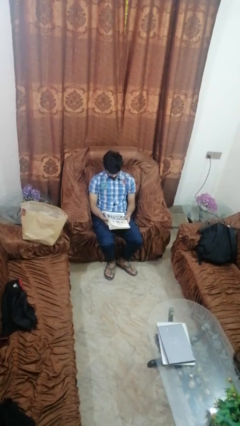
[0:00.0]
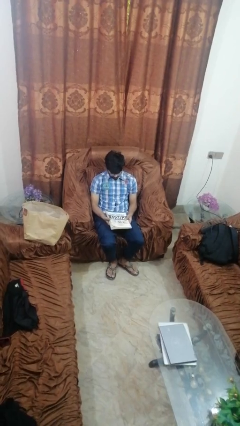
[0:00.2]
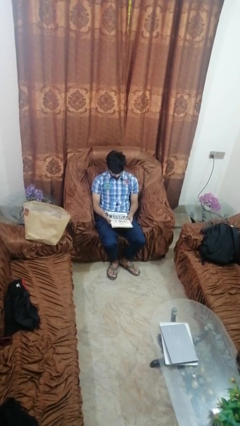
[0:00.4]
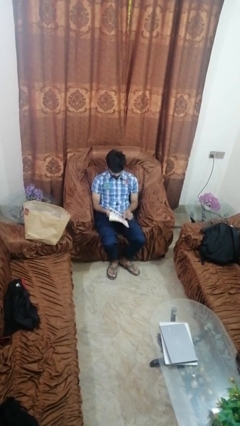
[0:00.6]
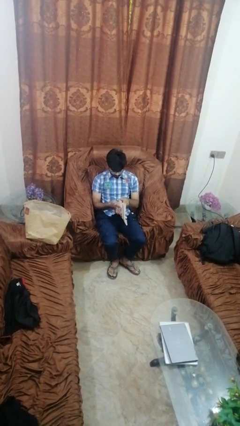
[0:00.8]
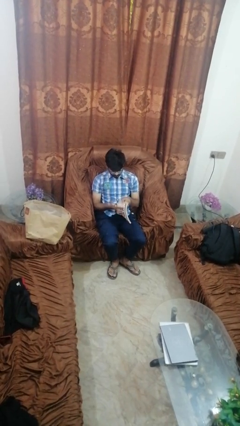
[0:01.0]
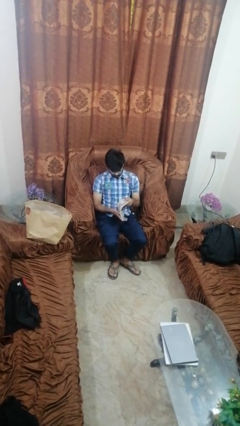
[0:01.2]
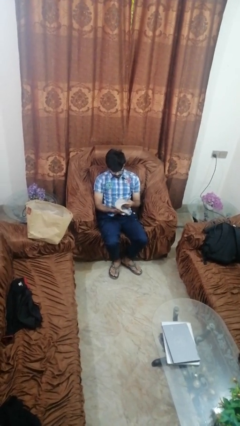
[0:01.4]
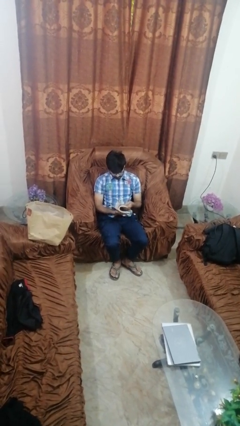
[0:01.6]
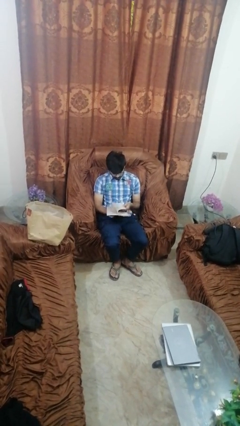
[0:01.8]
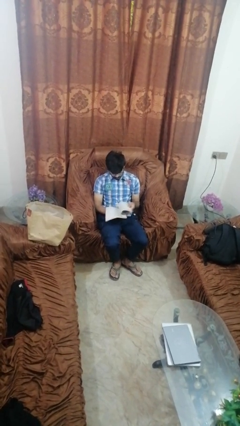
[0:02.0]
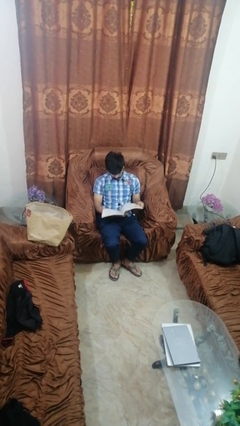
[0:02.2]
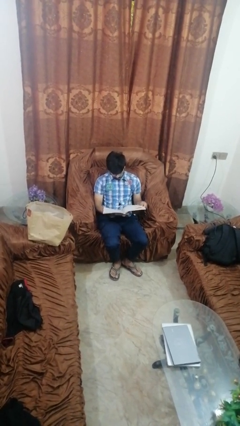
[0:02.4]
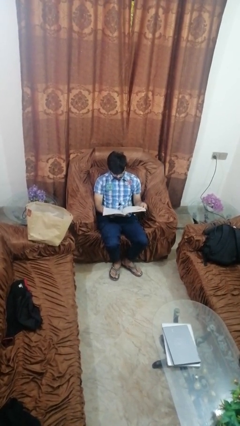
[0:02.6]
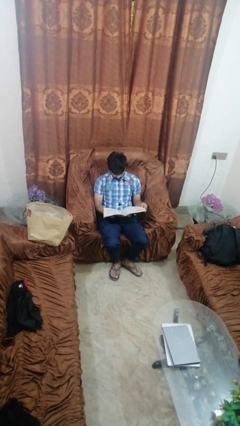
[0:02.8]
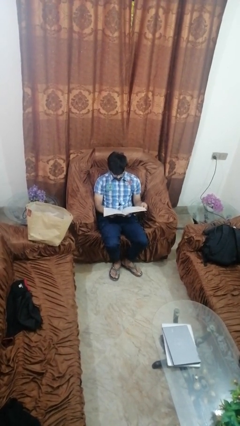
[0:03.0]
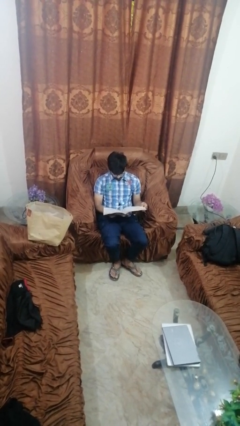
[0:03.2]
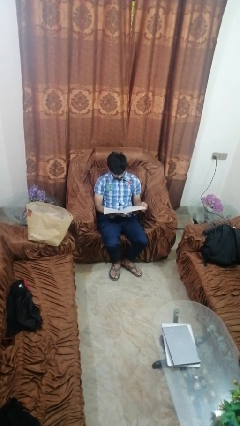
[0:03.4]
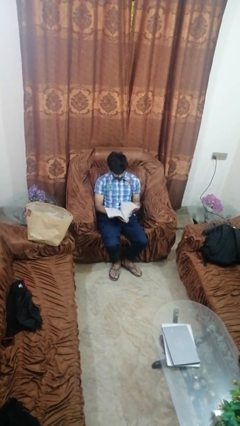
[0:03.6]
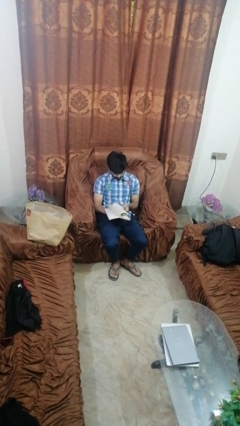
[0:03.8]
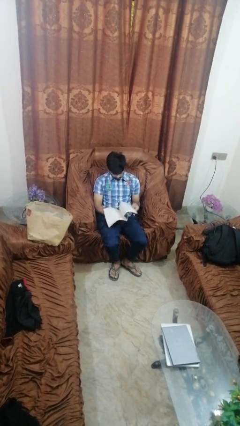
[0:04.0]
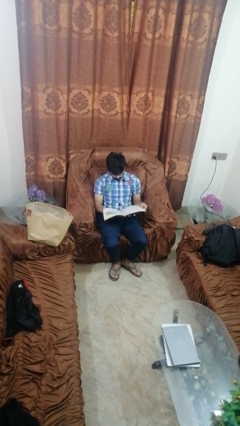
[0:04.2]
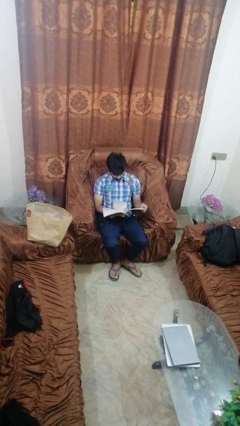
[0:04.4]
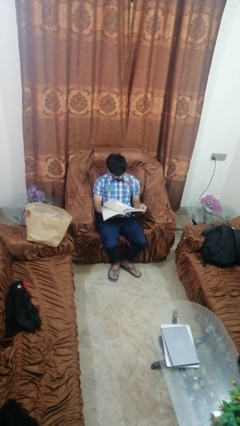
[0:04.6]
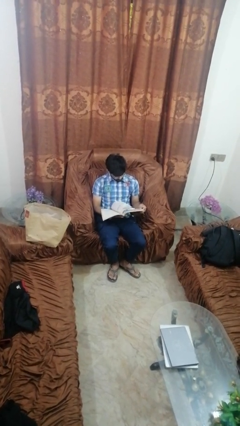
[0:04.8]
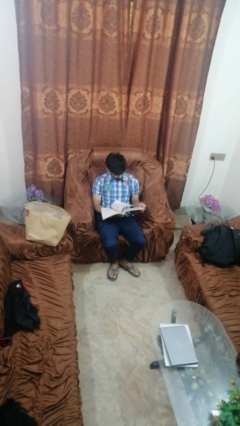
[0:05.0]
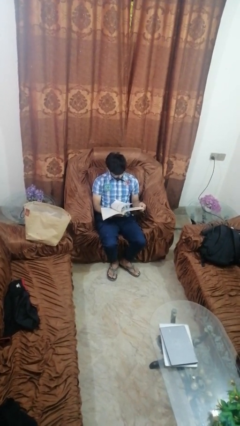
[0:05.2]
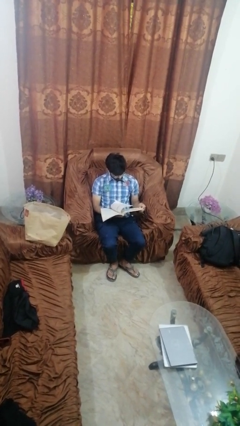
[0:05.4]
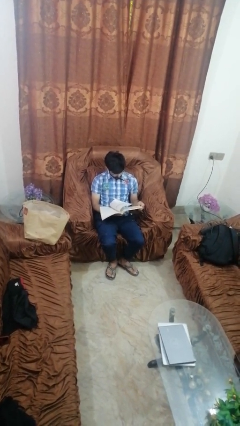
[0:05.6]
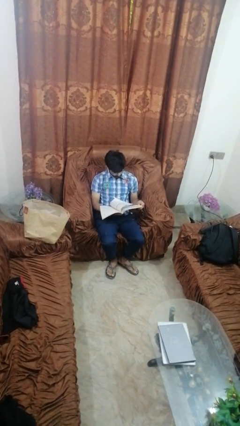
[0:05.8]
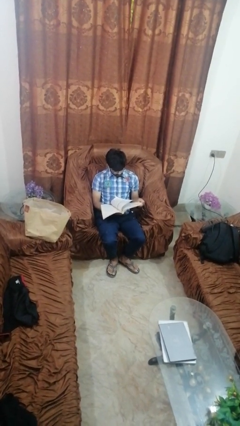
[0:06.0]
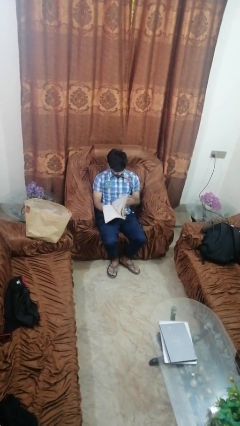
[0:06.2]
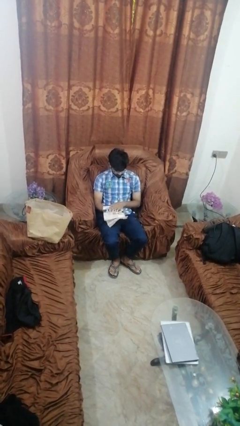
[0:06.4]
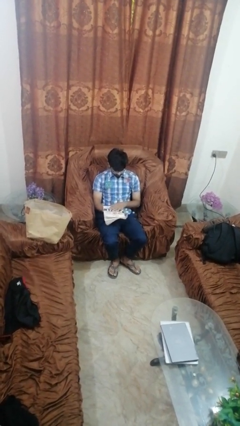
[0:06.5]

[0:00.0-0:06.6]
person reads magazine

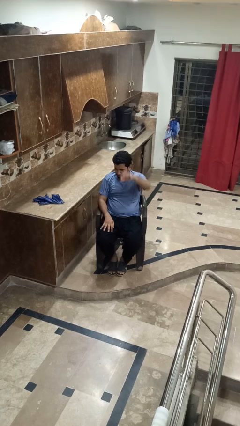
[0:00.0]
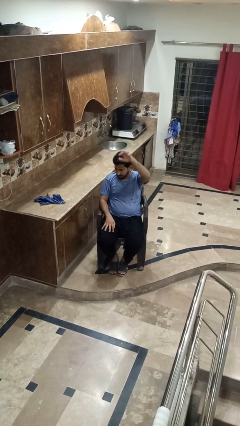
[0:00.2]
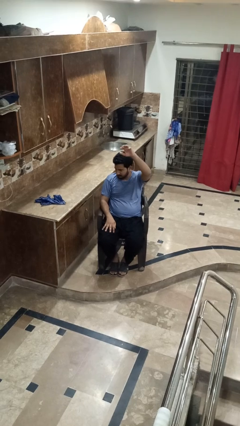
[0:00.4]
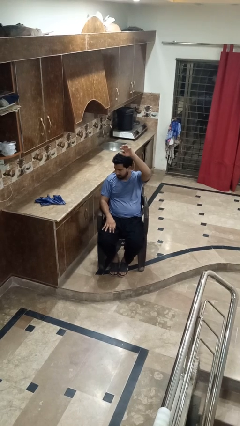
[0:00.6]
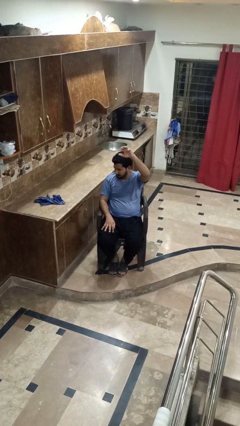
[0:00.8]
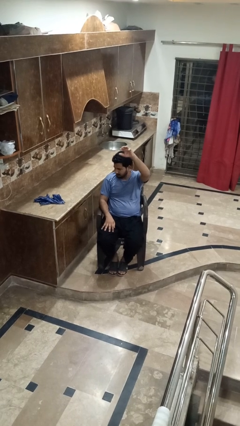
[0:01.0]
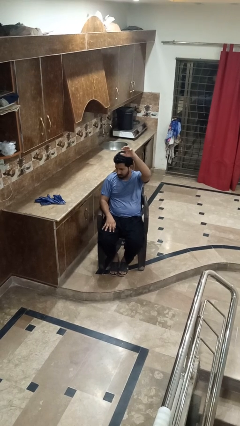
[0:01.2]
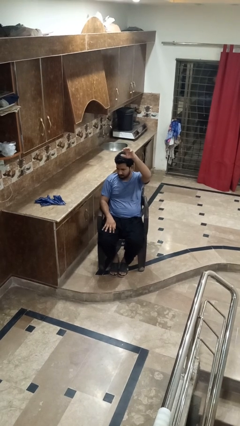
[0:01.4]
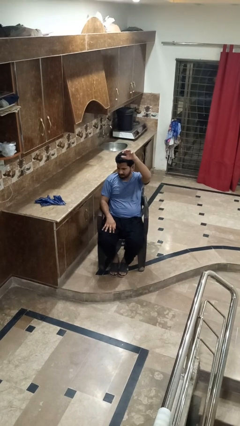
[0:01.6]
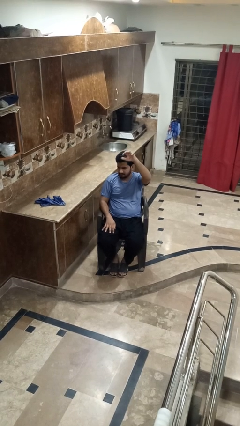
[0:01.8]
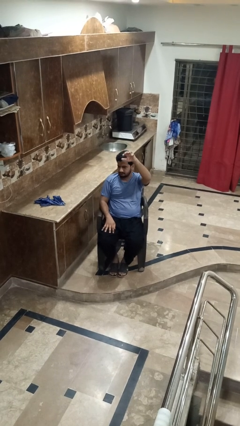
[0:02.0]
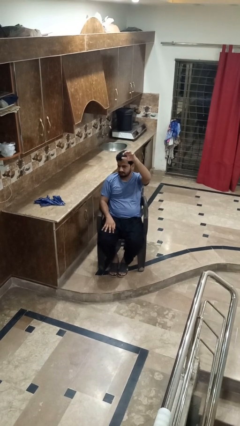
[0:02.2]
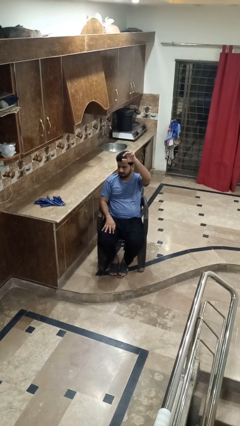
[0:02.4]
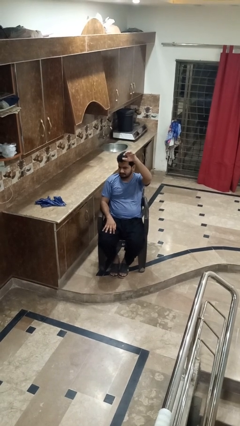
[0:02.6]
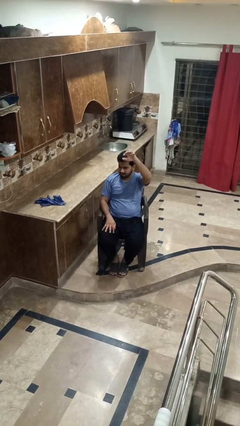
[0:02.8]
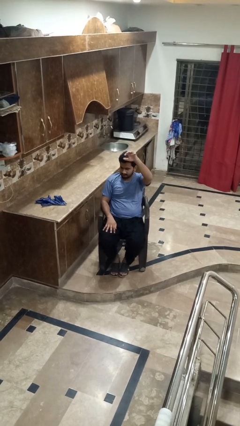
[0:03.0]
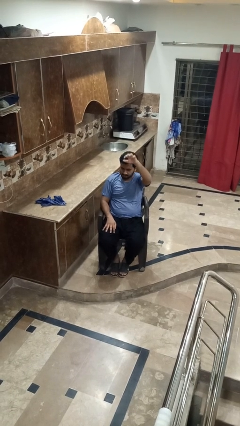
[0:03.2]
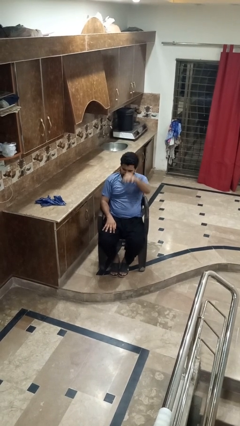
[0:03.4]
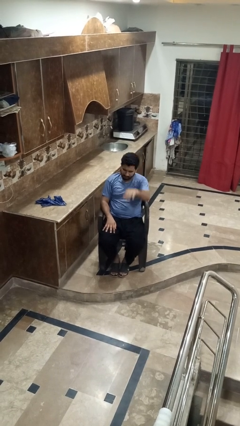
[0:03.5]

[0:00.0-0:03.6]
person gestures raise hand

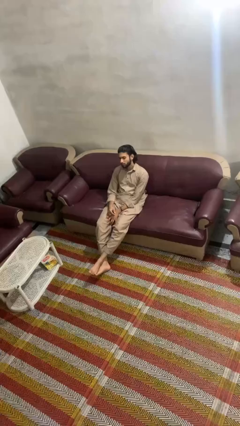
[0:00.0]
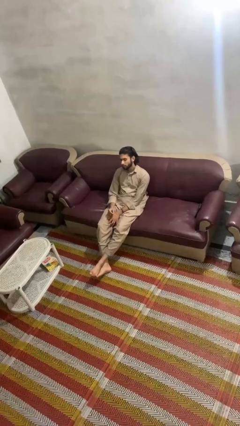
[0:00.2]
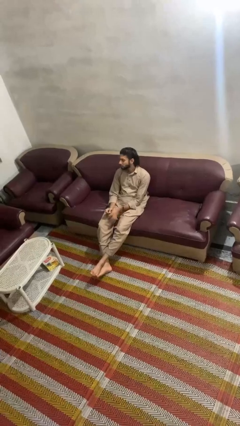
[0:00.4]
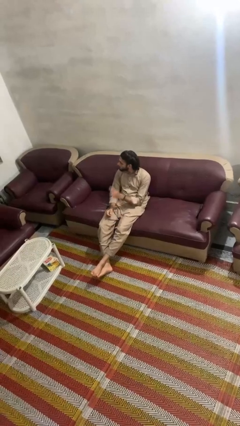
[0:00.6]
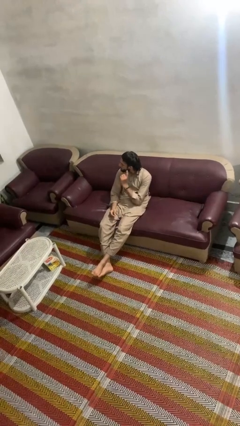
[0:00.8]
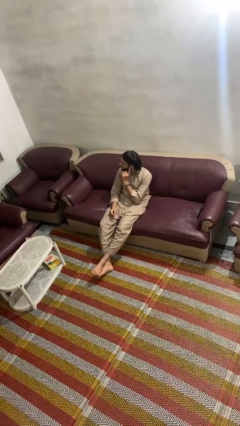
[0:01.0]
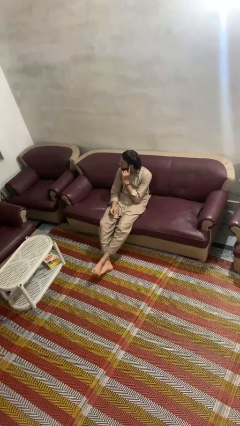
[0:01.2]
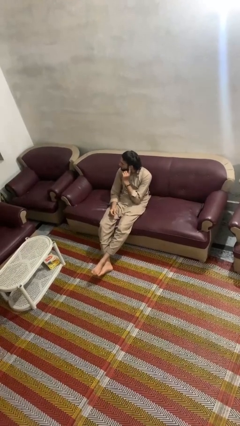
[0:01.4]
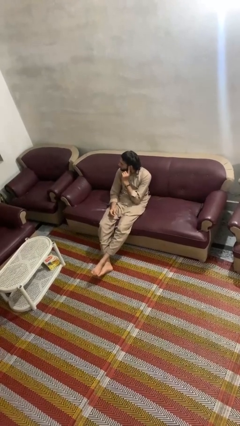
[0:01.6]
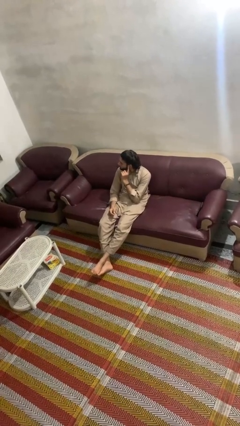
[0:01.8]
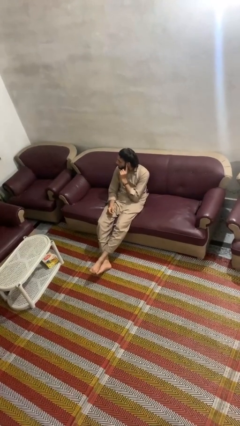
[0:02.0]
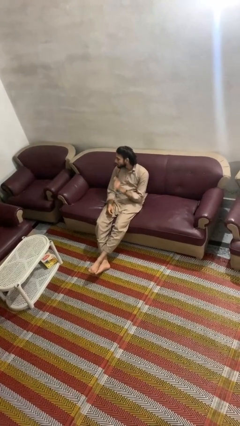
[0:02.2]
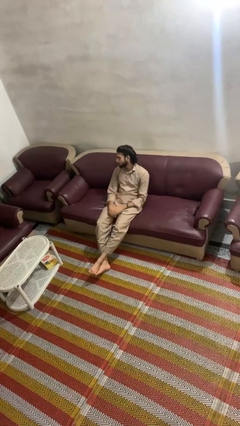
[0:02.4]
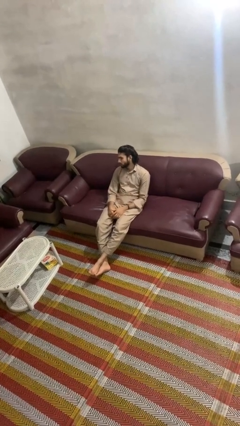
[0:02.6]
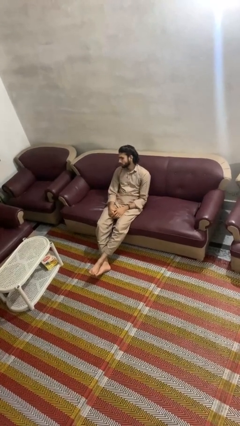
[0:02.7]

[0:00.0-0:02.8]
person gestures listen closely

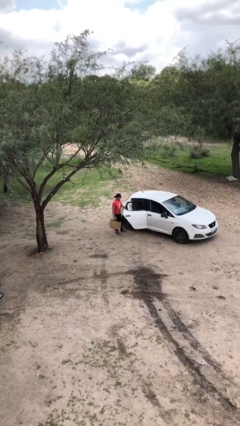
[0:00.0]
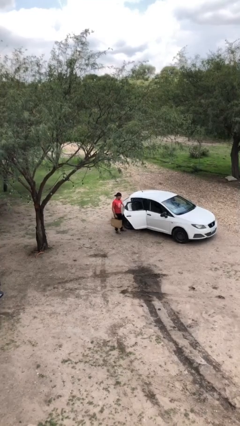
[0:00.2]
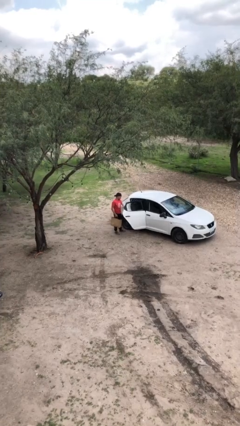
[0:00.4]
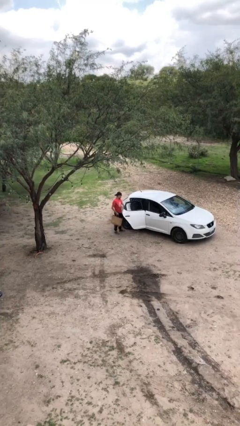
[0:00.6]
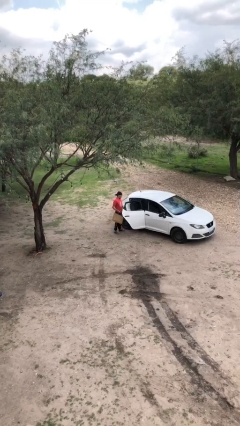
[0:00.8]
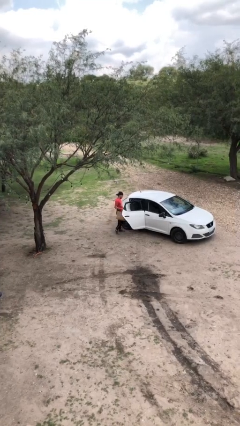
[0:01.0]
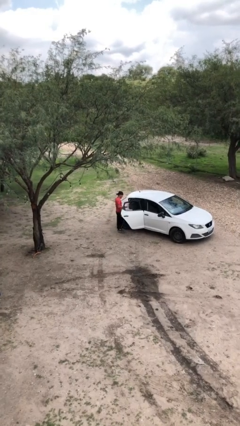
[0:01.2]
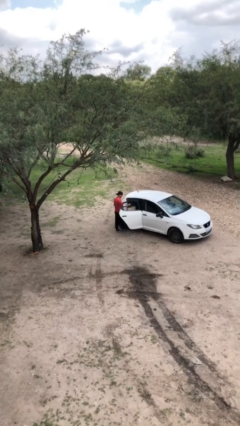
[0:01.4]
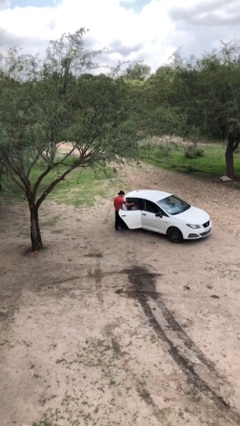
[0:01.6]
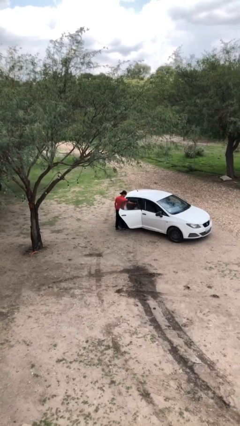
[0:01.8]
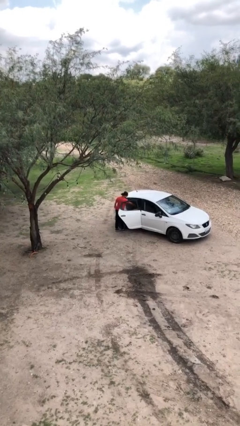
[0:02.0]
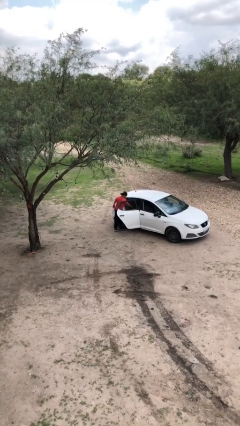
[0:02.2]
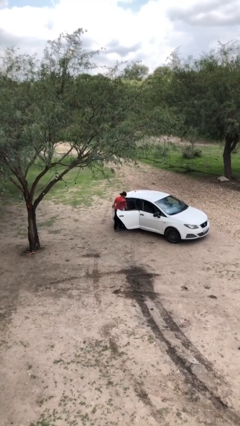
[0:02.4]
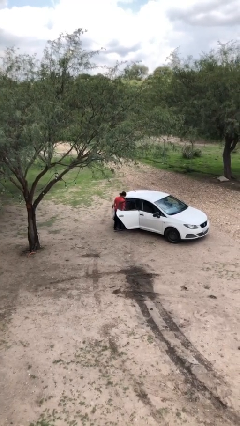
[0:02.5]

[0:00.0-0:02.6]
person loads car

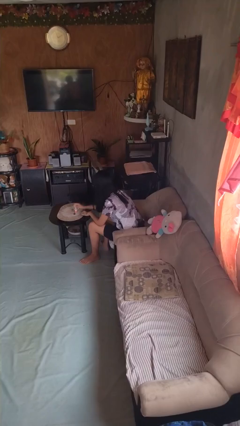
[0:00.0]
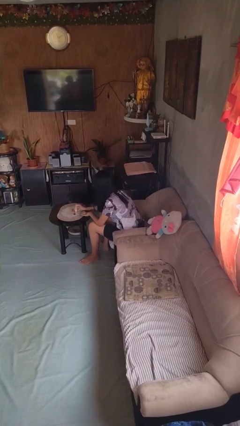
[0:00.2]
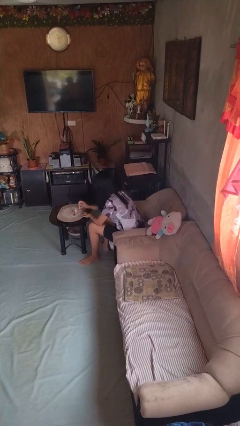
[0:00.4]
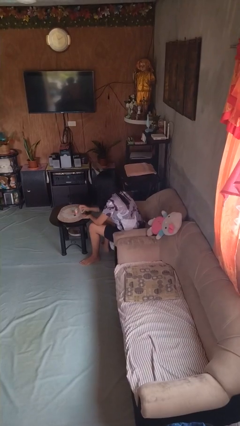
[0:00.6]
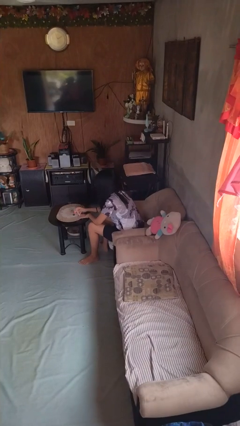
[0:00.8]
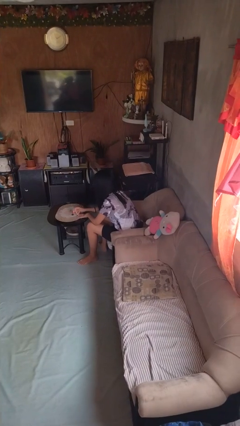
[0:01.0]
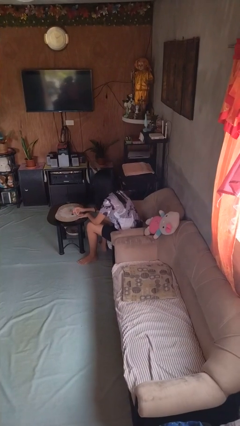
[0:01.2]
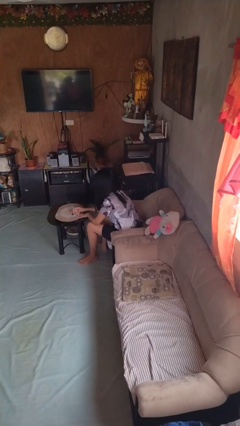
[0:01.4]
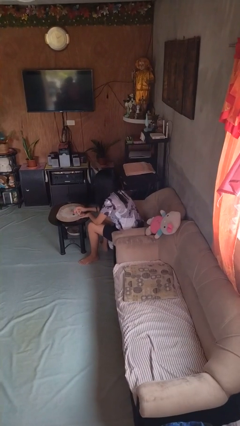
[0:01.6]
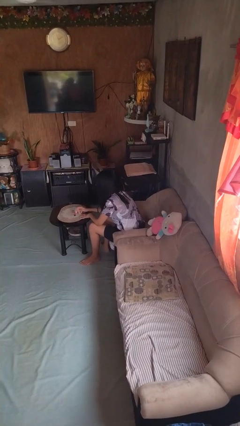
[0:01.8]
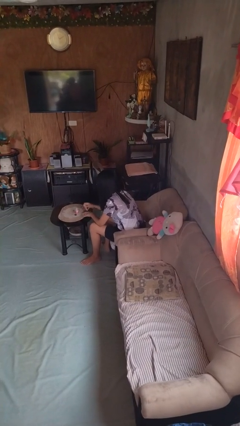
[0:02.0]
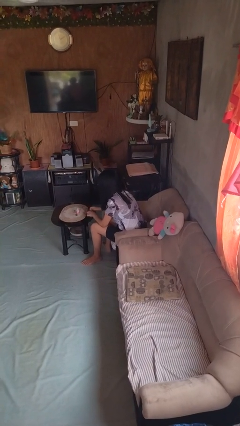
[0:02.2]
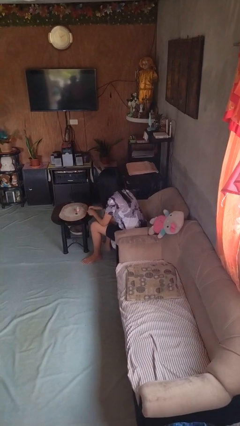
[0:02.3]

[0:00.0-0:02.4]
person paints fingernails
